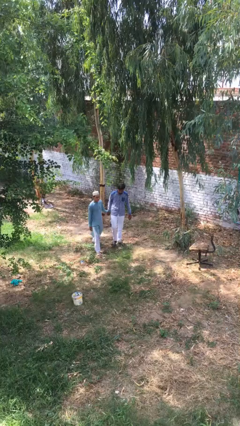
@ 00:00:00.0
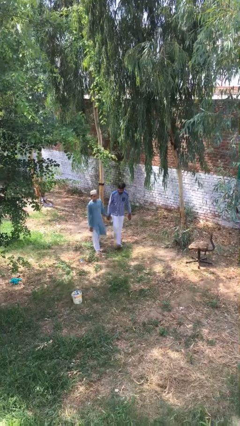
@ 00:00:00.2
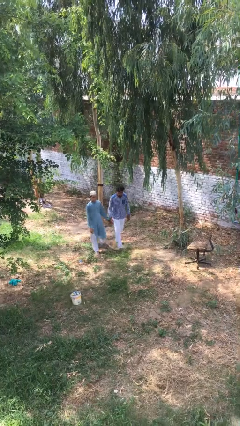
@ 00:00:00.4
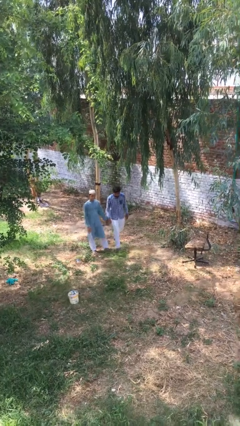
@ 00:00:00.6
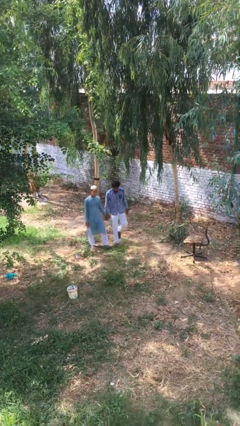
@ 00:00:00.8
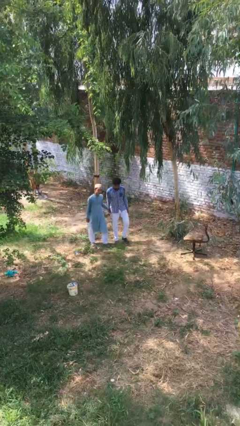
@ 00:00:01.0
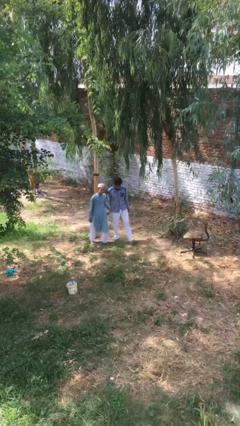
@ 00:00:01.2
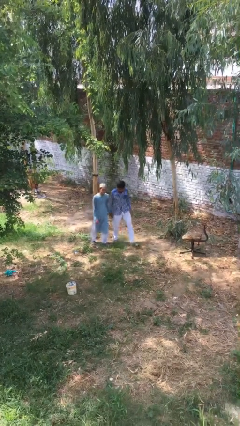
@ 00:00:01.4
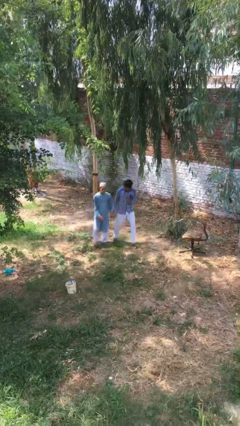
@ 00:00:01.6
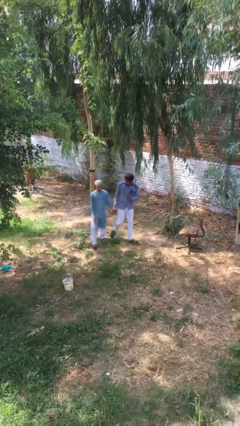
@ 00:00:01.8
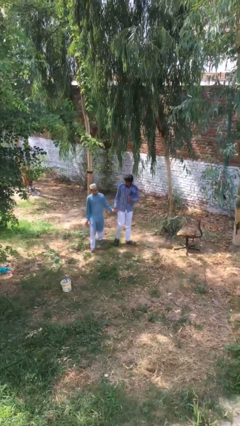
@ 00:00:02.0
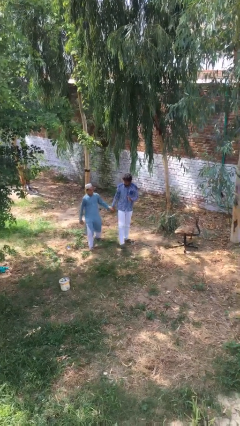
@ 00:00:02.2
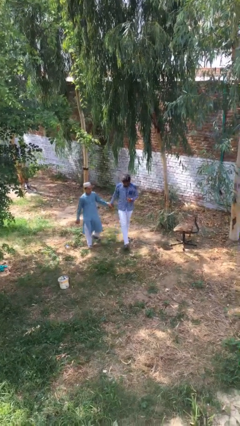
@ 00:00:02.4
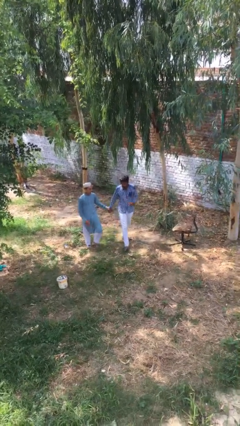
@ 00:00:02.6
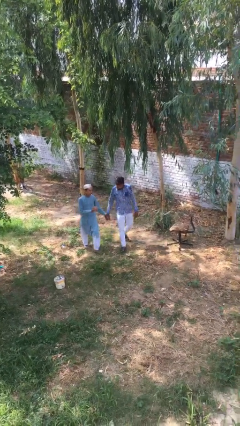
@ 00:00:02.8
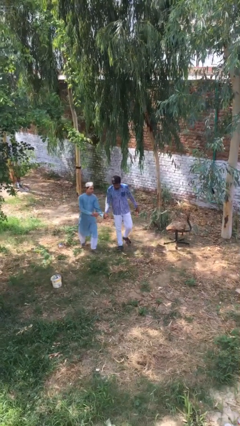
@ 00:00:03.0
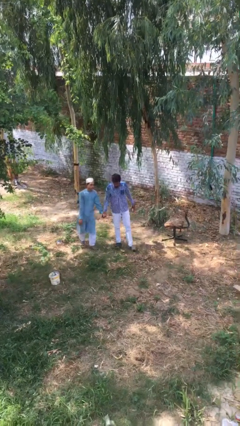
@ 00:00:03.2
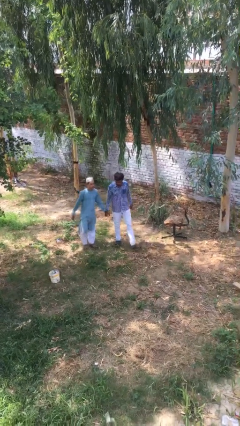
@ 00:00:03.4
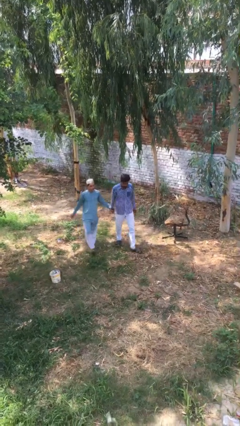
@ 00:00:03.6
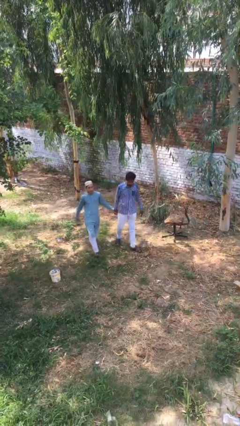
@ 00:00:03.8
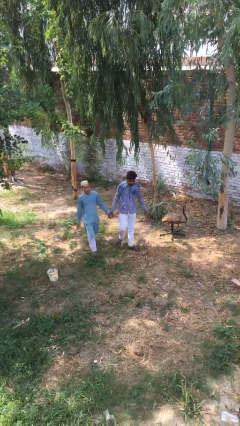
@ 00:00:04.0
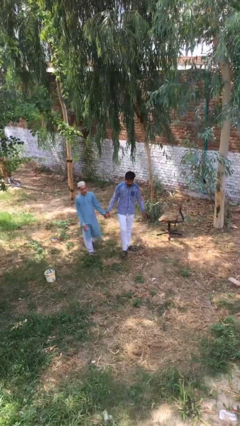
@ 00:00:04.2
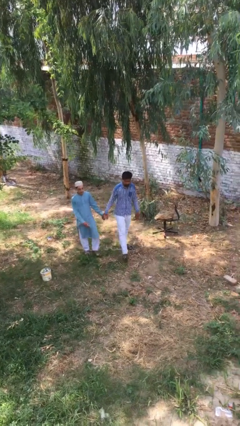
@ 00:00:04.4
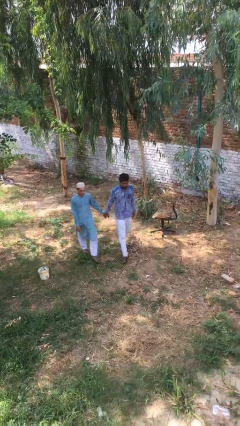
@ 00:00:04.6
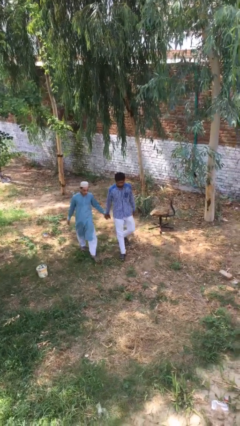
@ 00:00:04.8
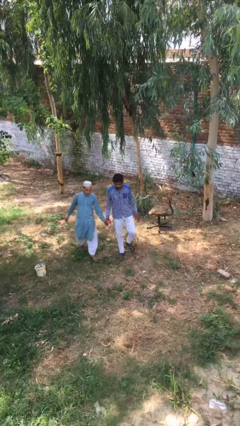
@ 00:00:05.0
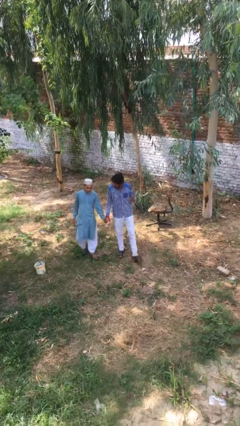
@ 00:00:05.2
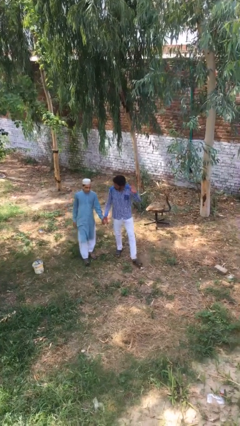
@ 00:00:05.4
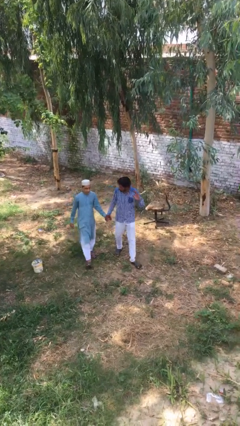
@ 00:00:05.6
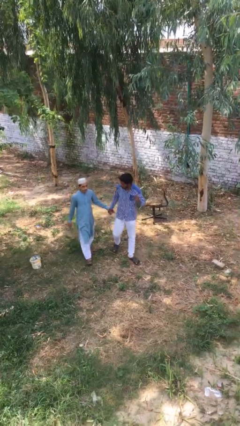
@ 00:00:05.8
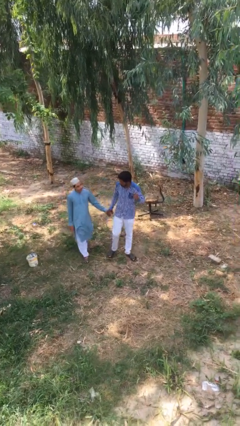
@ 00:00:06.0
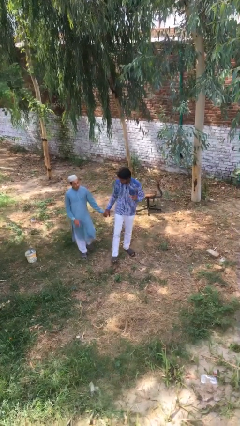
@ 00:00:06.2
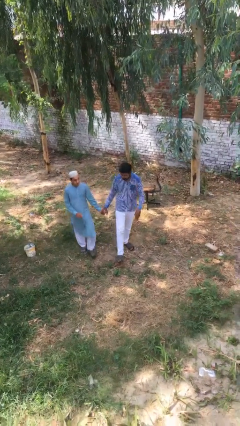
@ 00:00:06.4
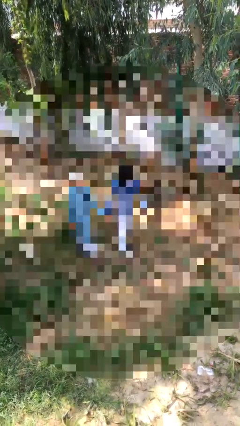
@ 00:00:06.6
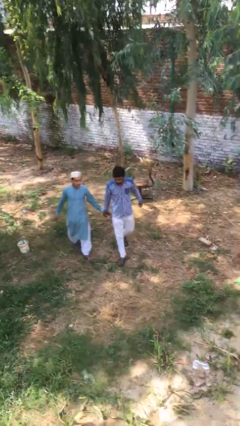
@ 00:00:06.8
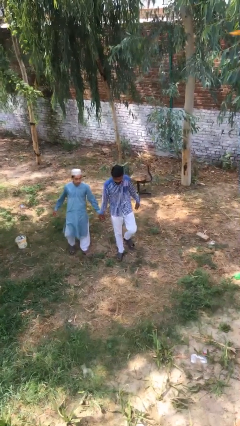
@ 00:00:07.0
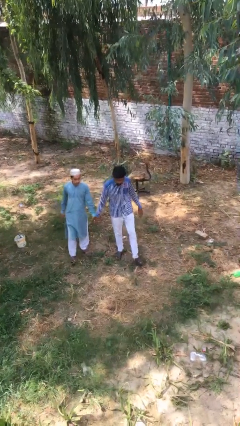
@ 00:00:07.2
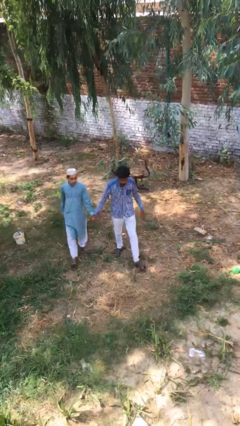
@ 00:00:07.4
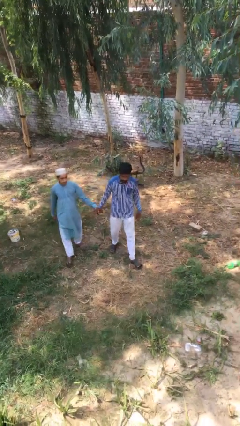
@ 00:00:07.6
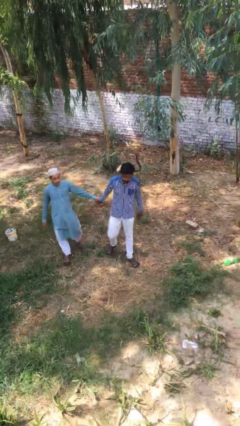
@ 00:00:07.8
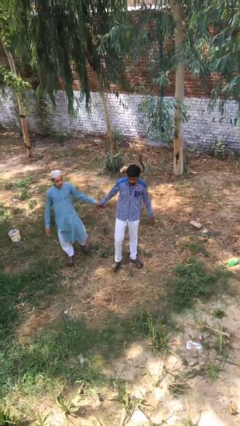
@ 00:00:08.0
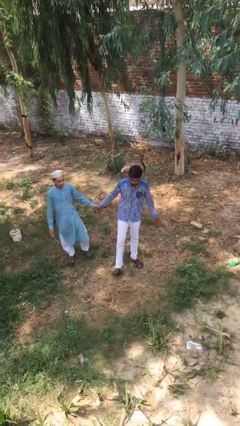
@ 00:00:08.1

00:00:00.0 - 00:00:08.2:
person holds hand

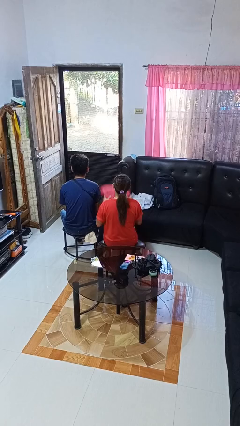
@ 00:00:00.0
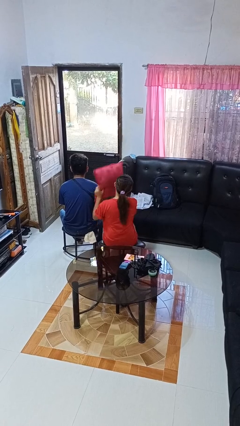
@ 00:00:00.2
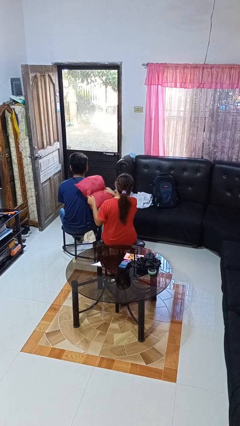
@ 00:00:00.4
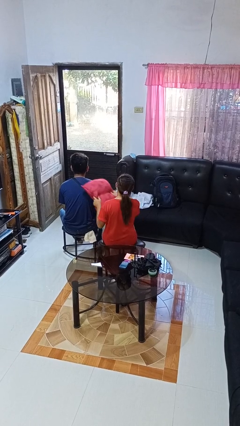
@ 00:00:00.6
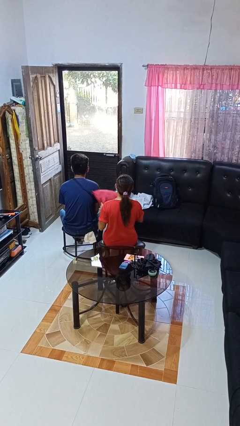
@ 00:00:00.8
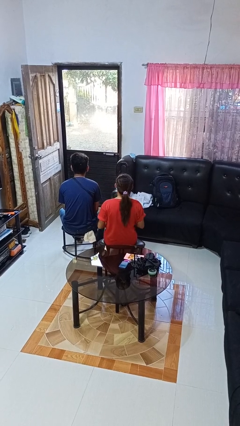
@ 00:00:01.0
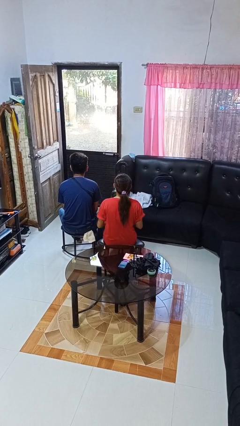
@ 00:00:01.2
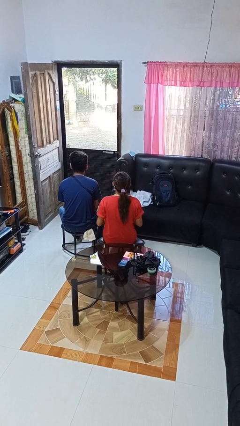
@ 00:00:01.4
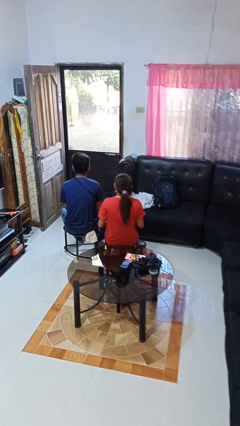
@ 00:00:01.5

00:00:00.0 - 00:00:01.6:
person hits person with pillow

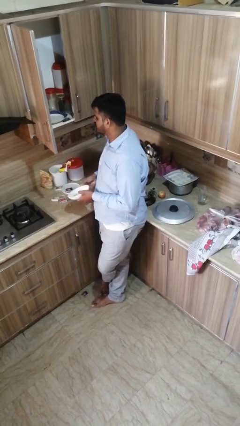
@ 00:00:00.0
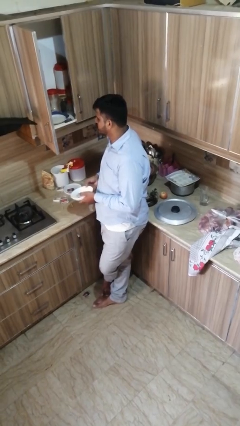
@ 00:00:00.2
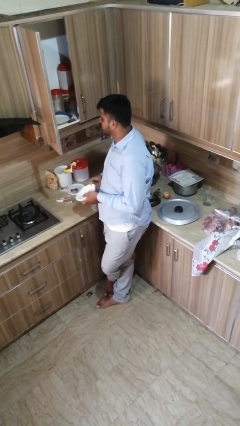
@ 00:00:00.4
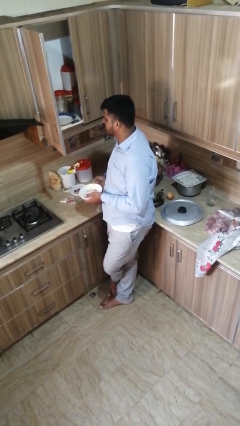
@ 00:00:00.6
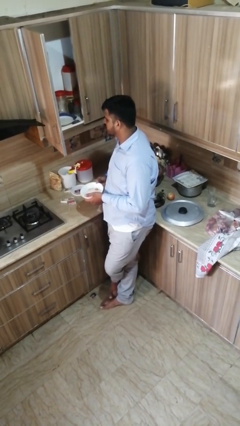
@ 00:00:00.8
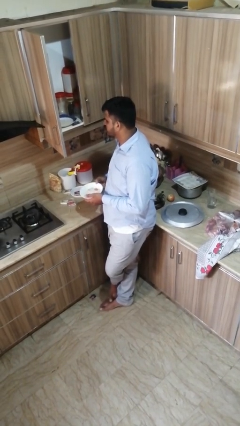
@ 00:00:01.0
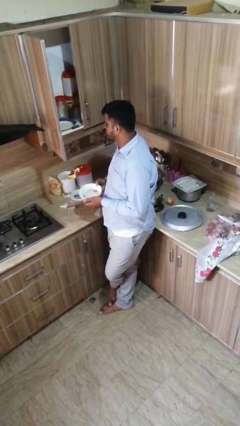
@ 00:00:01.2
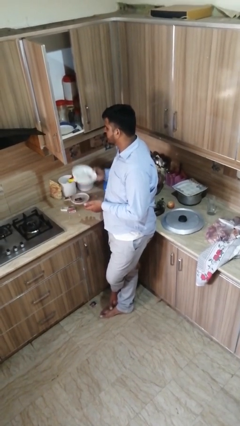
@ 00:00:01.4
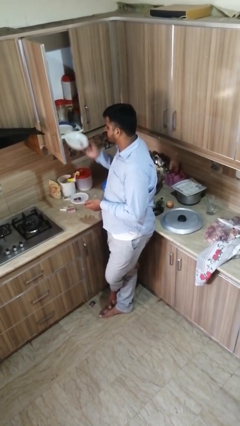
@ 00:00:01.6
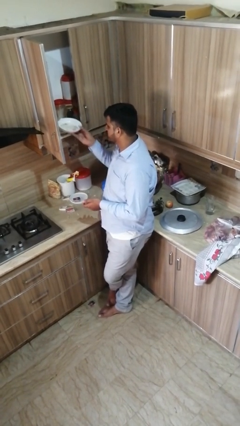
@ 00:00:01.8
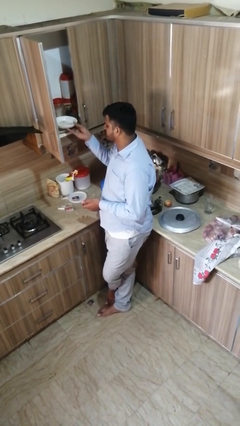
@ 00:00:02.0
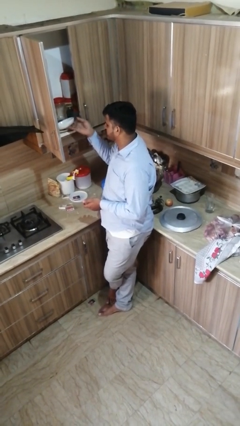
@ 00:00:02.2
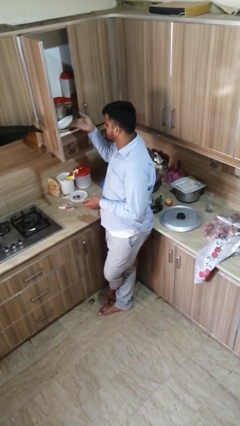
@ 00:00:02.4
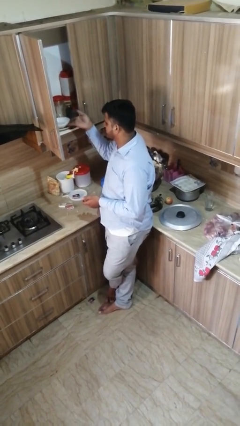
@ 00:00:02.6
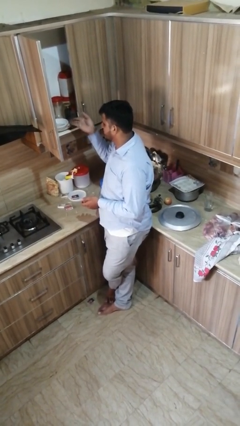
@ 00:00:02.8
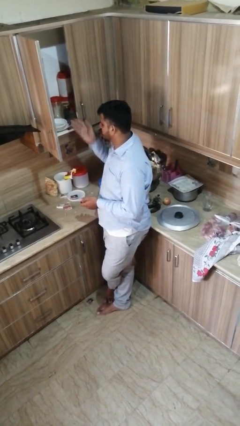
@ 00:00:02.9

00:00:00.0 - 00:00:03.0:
person puts object in cabinet

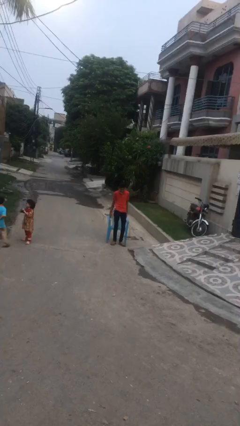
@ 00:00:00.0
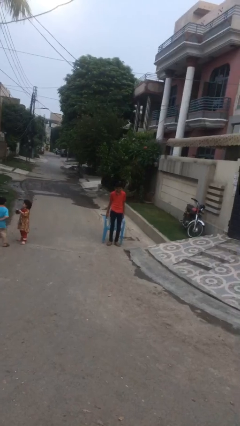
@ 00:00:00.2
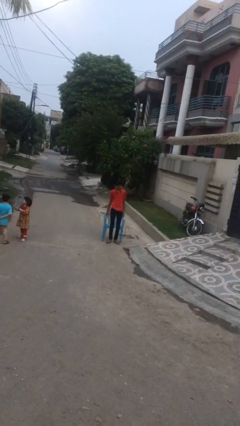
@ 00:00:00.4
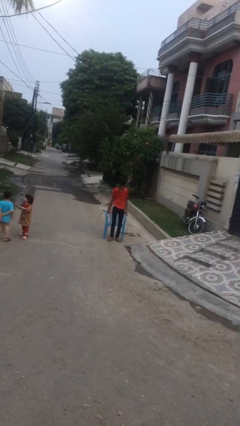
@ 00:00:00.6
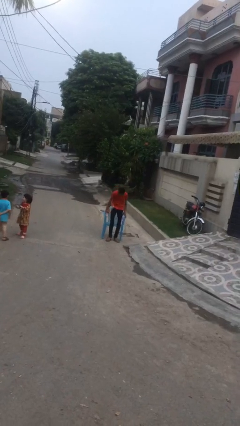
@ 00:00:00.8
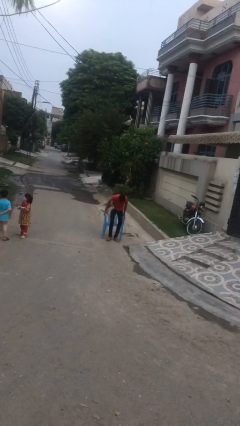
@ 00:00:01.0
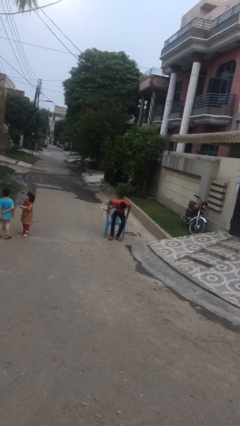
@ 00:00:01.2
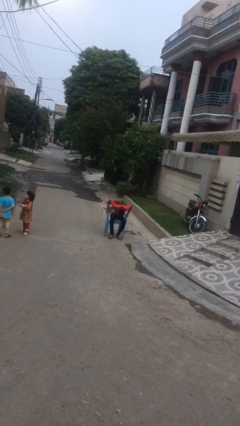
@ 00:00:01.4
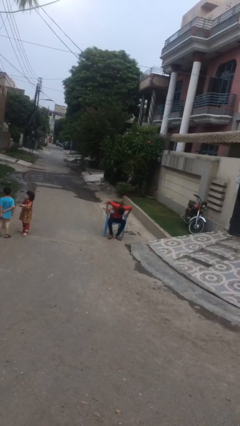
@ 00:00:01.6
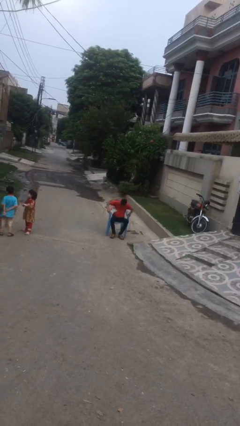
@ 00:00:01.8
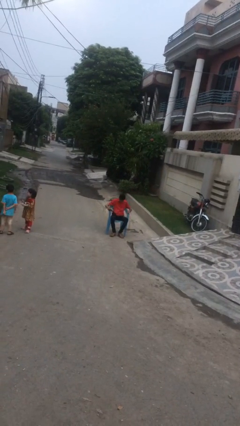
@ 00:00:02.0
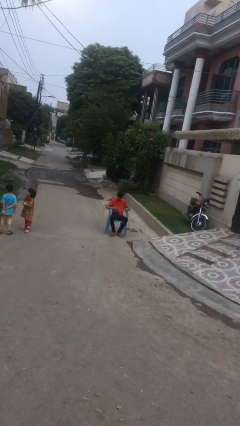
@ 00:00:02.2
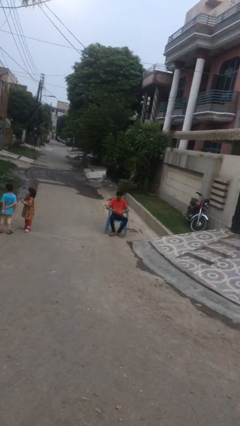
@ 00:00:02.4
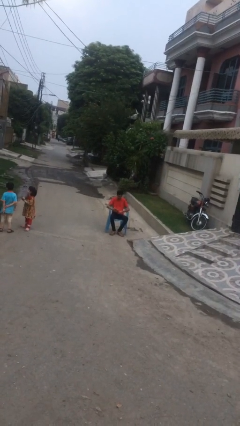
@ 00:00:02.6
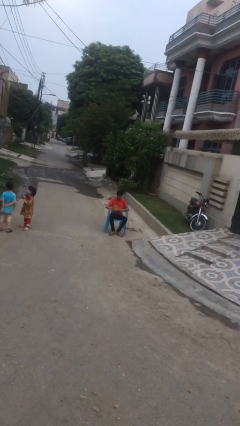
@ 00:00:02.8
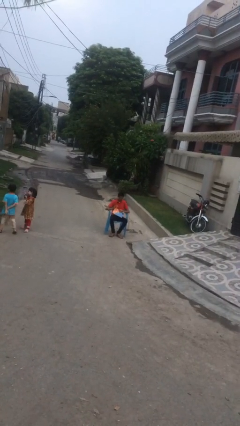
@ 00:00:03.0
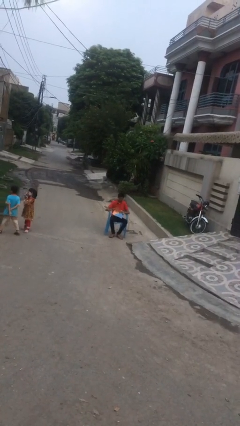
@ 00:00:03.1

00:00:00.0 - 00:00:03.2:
person sits down

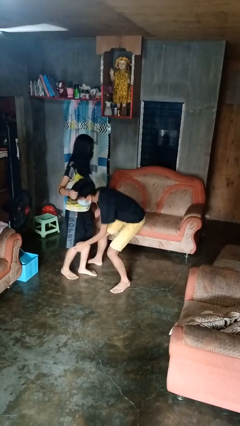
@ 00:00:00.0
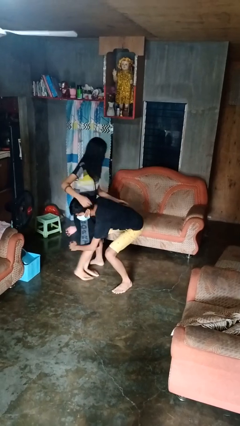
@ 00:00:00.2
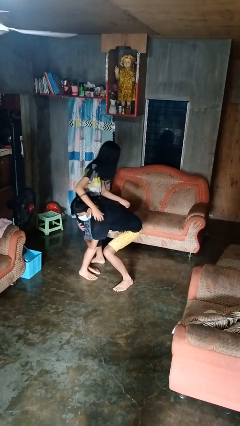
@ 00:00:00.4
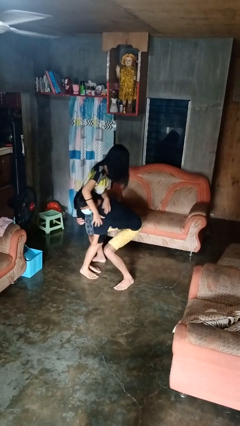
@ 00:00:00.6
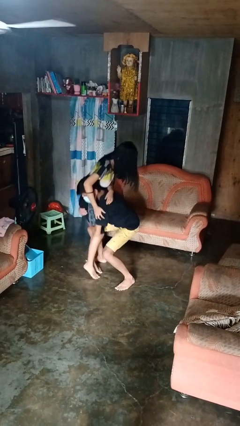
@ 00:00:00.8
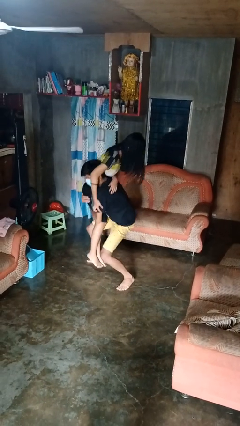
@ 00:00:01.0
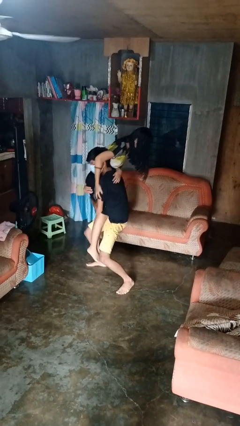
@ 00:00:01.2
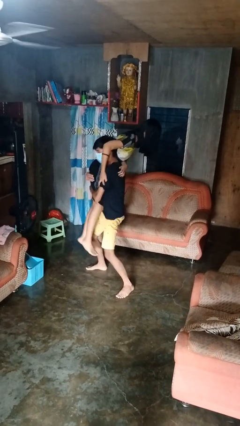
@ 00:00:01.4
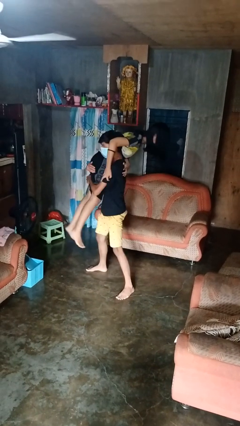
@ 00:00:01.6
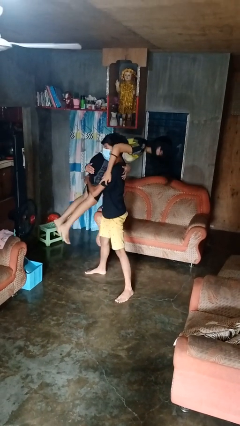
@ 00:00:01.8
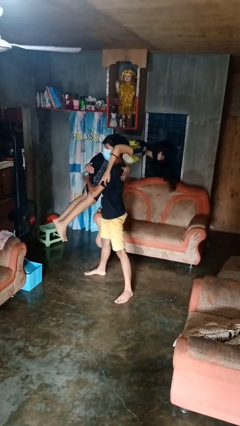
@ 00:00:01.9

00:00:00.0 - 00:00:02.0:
person carries person over shoulder
